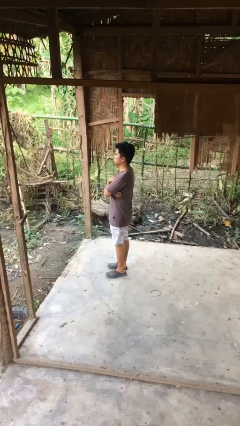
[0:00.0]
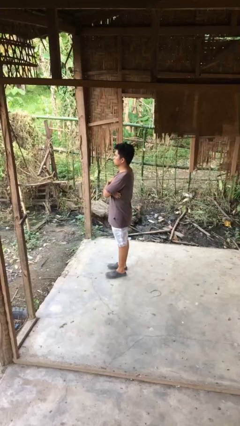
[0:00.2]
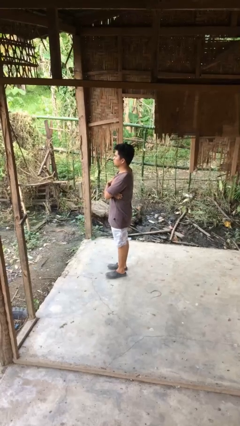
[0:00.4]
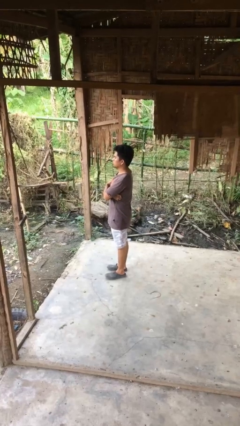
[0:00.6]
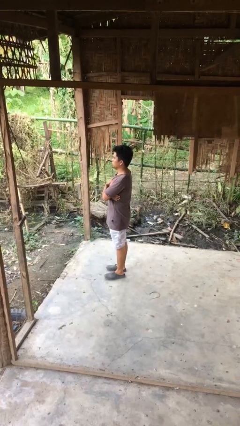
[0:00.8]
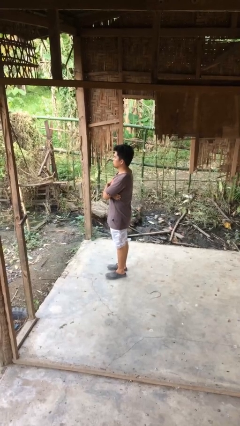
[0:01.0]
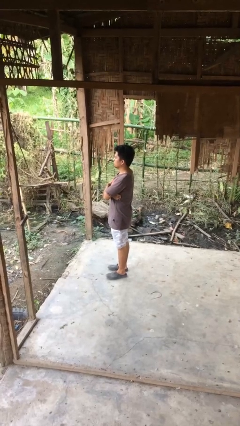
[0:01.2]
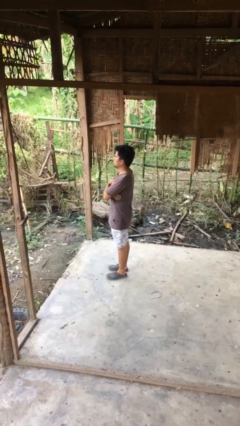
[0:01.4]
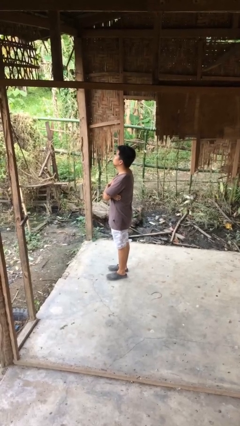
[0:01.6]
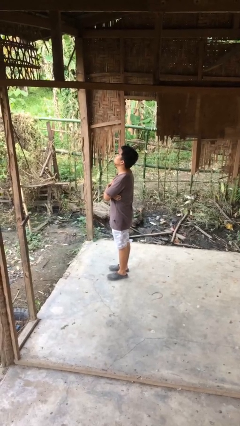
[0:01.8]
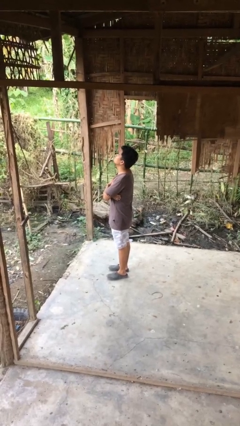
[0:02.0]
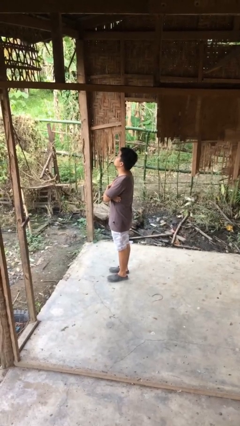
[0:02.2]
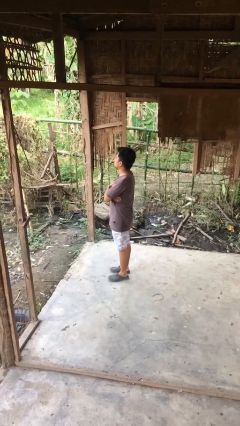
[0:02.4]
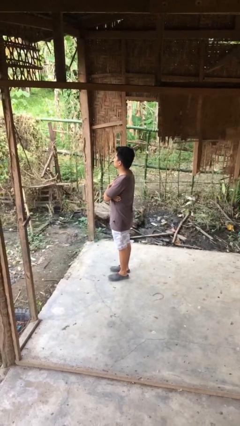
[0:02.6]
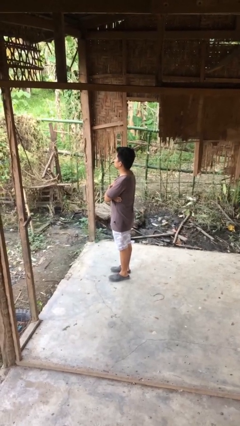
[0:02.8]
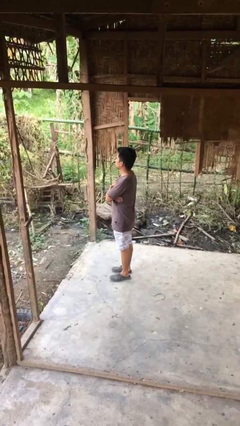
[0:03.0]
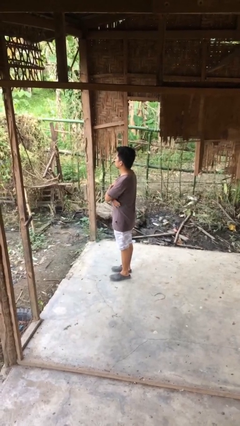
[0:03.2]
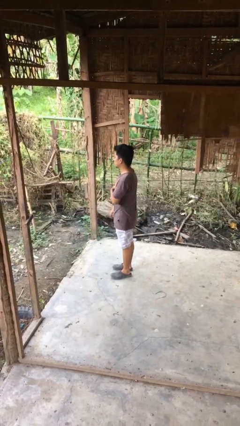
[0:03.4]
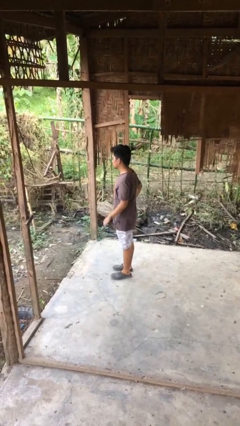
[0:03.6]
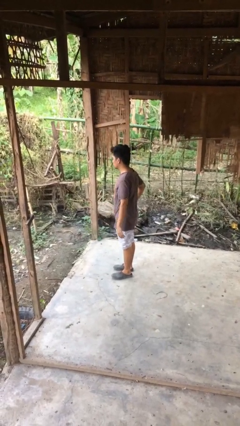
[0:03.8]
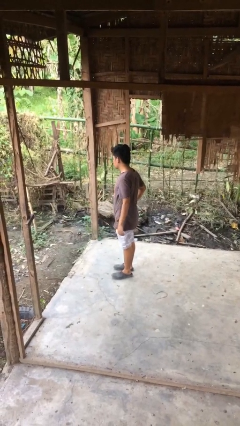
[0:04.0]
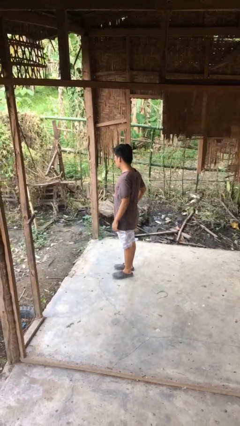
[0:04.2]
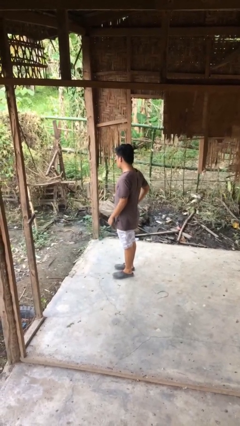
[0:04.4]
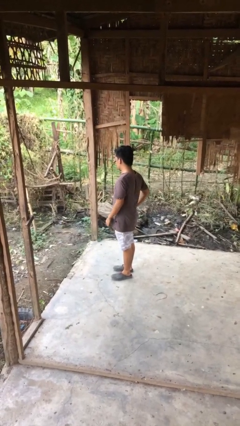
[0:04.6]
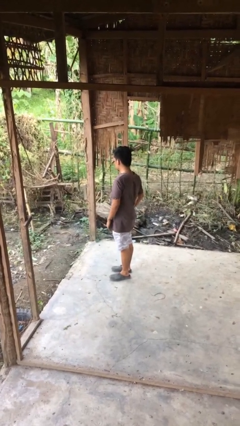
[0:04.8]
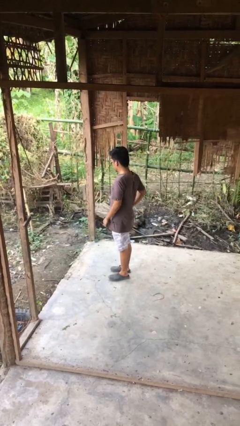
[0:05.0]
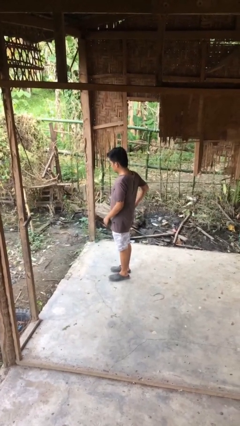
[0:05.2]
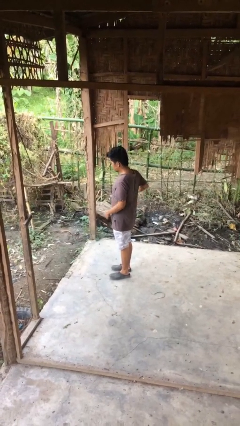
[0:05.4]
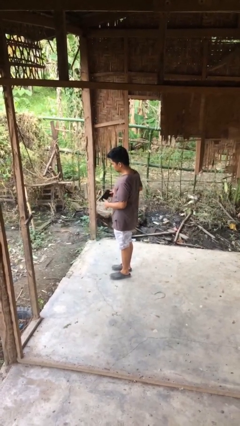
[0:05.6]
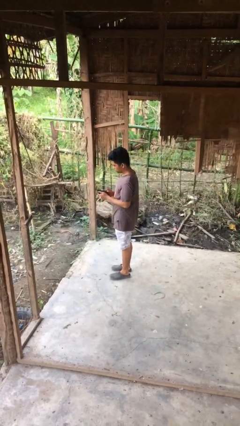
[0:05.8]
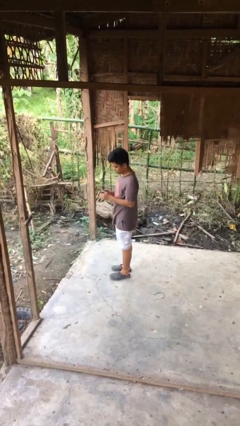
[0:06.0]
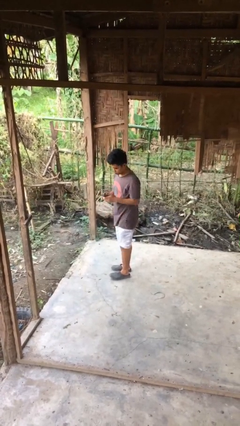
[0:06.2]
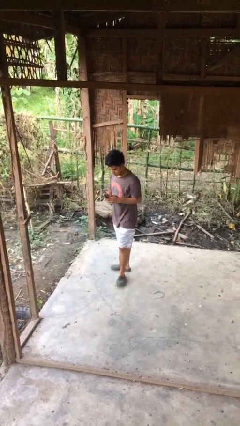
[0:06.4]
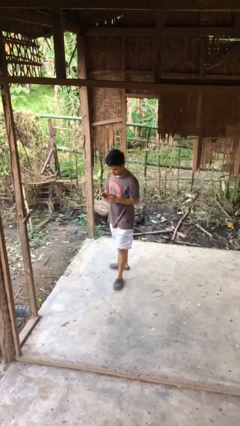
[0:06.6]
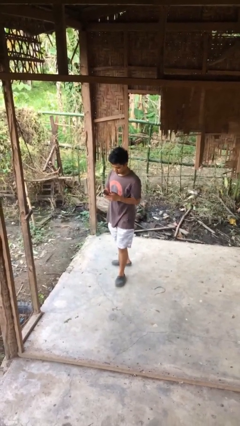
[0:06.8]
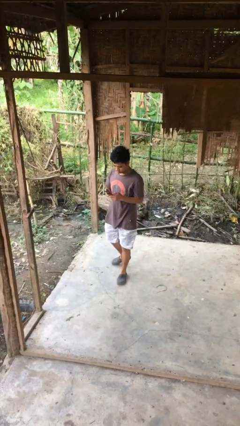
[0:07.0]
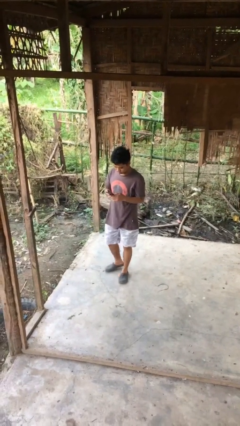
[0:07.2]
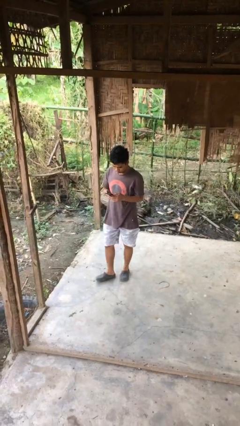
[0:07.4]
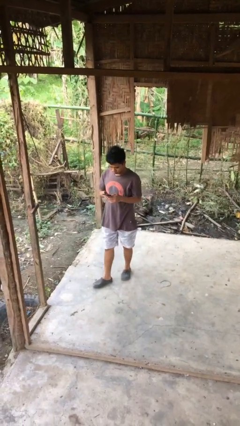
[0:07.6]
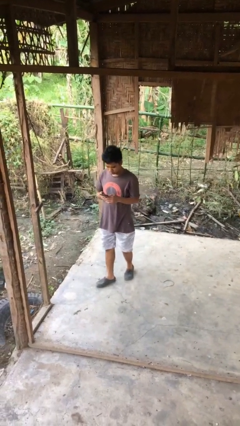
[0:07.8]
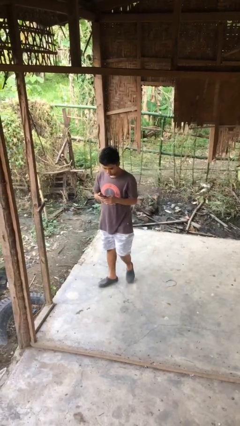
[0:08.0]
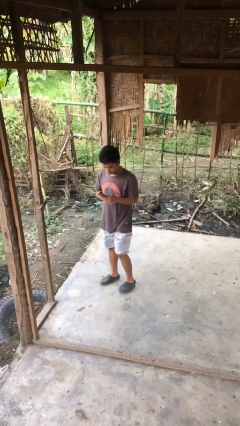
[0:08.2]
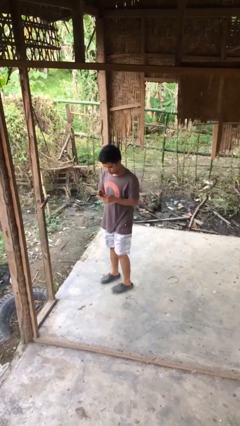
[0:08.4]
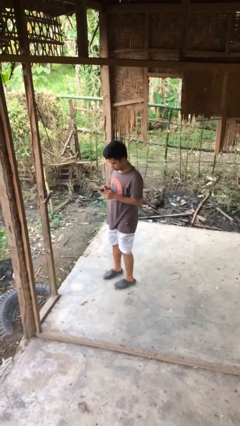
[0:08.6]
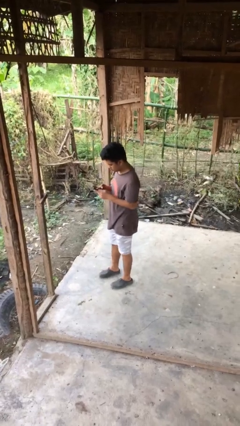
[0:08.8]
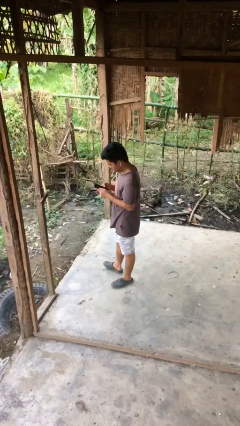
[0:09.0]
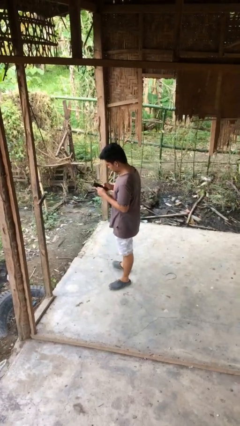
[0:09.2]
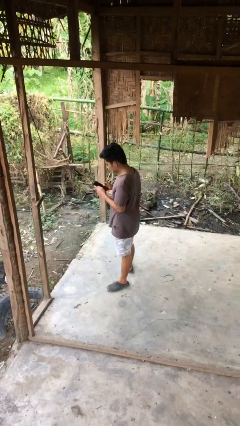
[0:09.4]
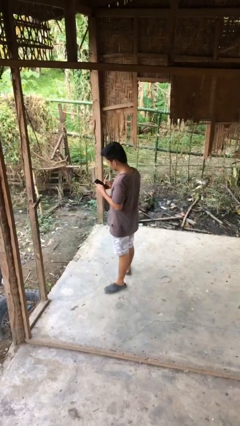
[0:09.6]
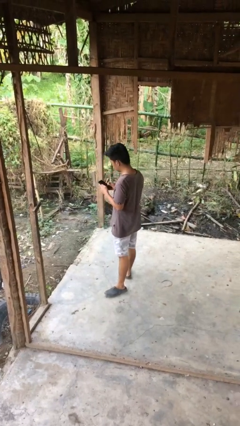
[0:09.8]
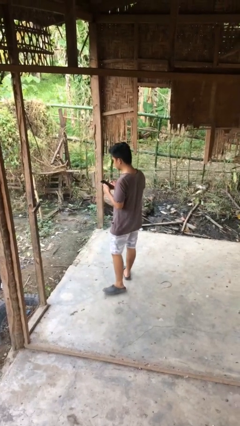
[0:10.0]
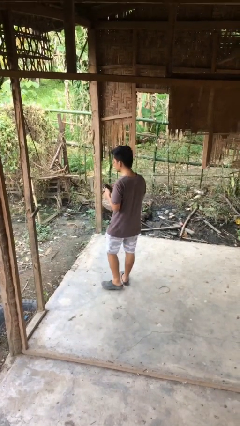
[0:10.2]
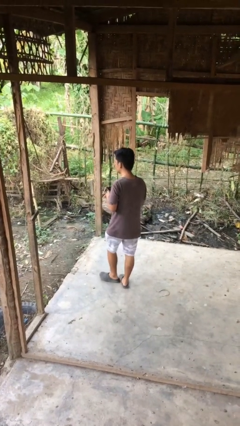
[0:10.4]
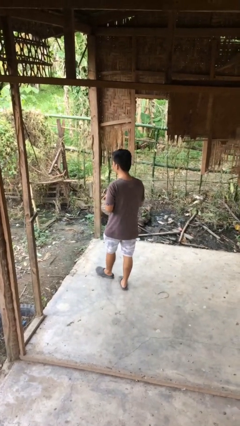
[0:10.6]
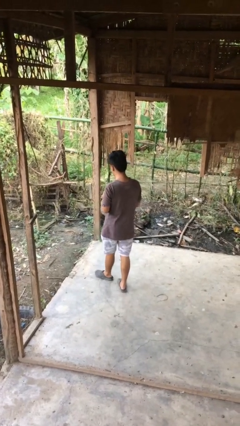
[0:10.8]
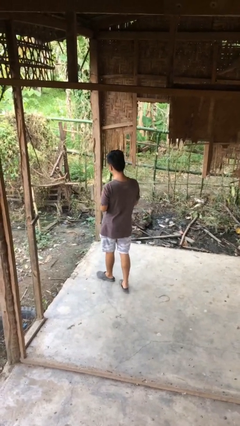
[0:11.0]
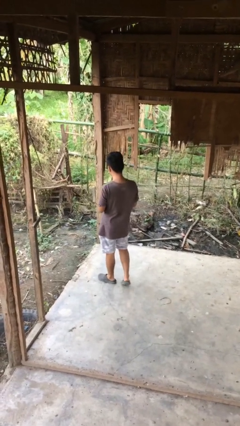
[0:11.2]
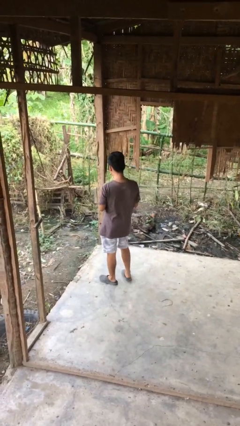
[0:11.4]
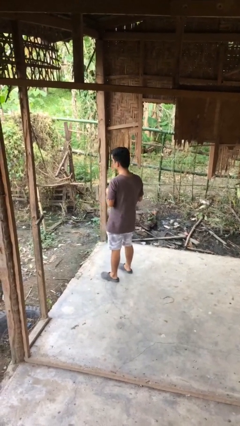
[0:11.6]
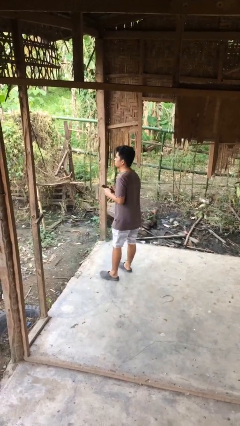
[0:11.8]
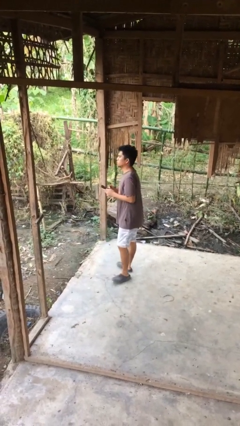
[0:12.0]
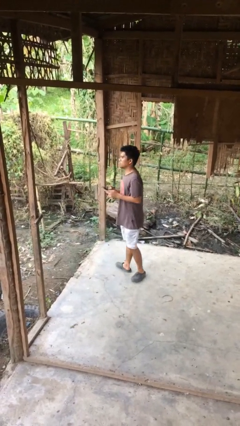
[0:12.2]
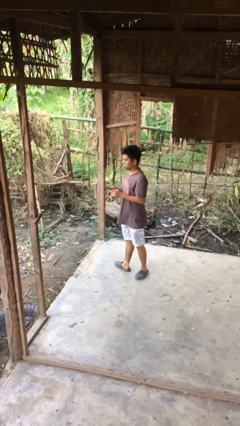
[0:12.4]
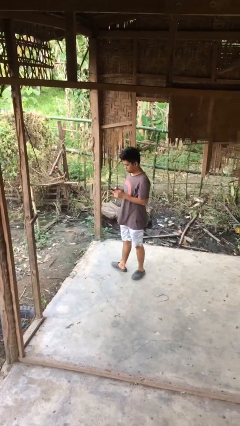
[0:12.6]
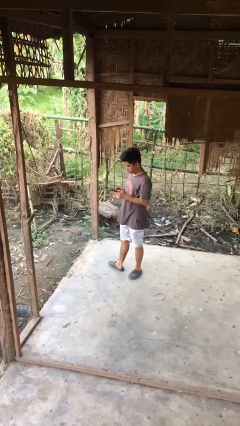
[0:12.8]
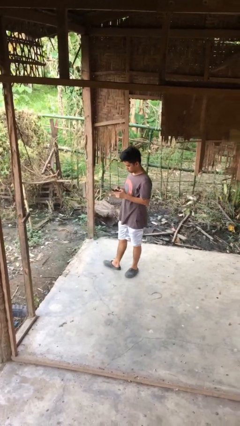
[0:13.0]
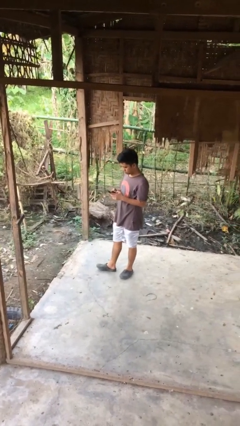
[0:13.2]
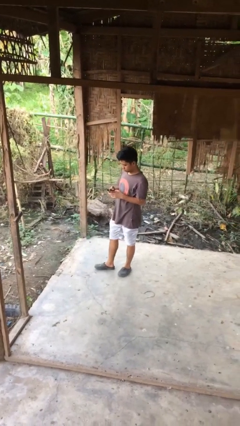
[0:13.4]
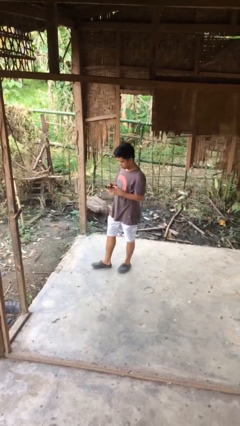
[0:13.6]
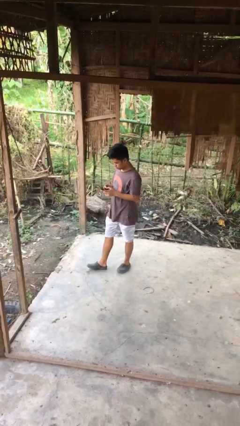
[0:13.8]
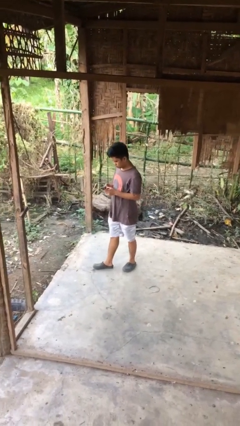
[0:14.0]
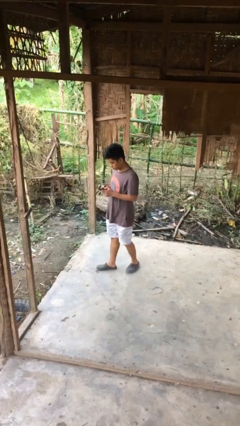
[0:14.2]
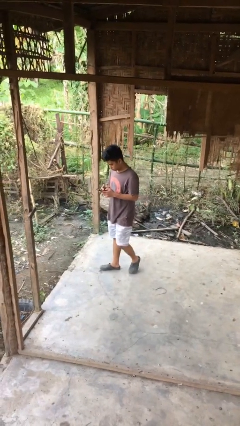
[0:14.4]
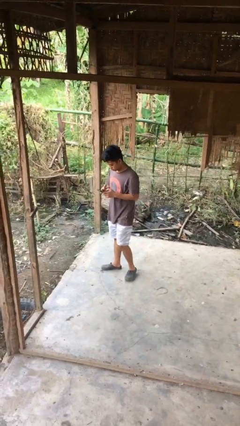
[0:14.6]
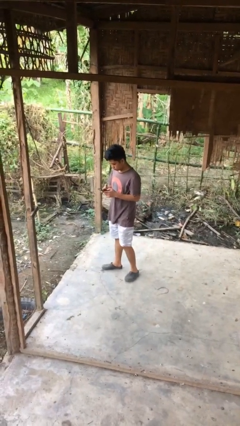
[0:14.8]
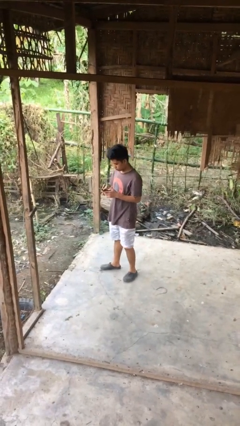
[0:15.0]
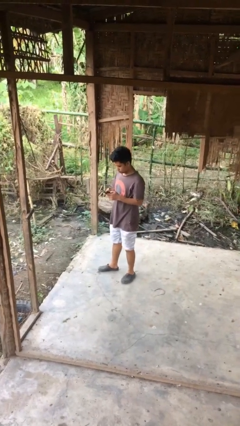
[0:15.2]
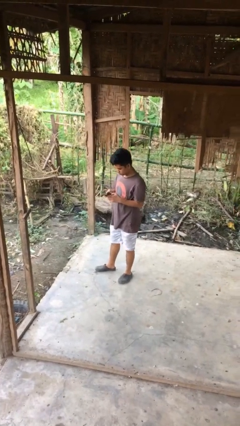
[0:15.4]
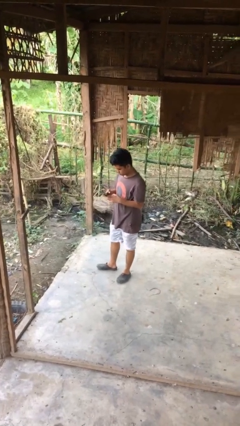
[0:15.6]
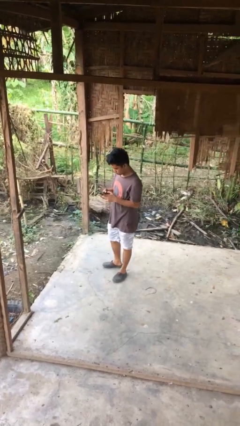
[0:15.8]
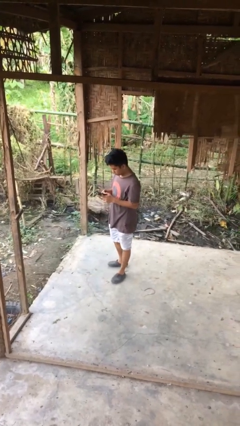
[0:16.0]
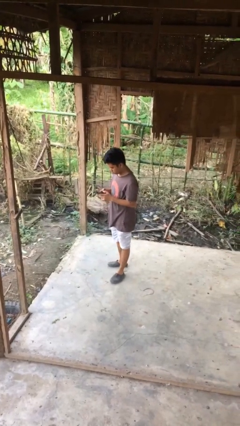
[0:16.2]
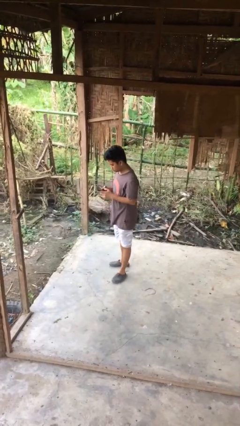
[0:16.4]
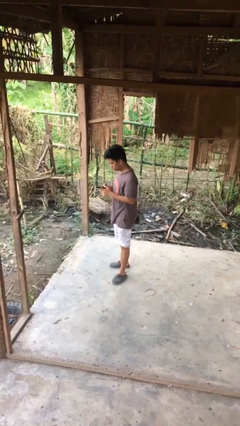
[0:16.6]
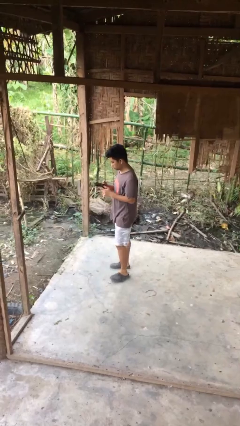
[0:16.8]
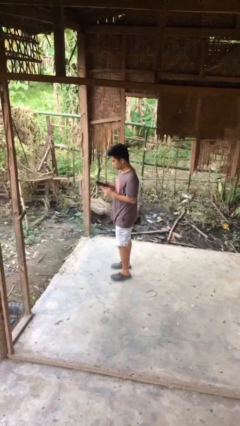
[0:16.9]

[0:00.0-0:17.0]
person walks

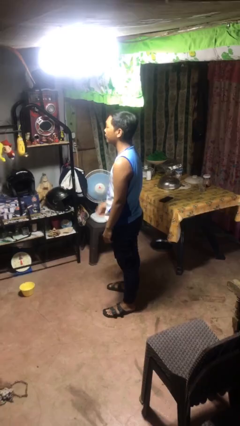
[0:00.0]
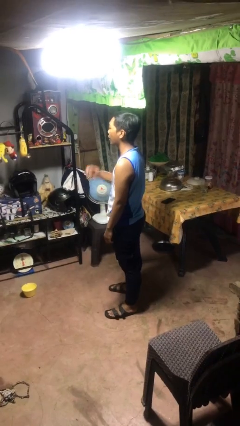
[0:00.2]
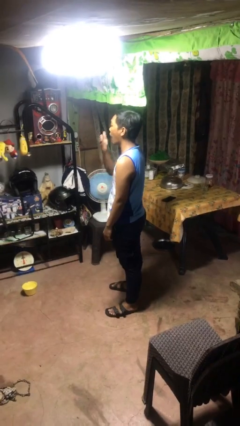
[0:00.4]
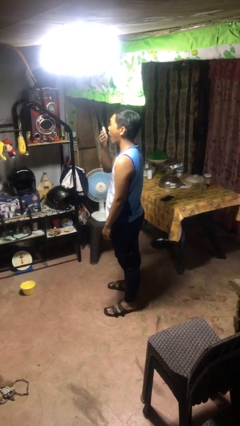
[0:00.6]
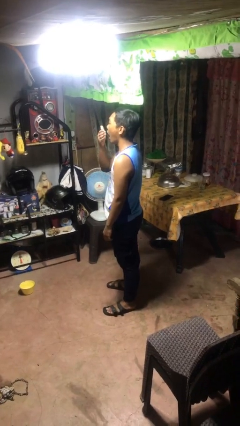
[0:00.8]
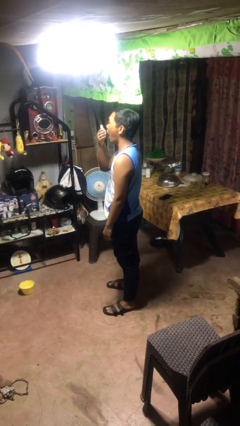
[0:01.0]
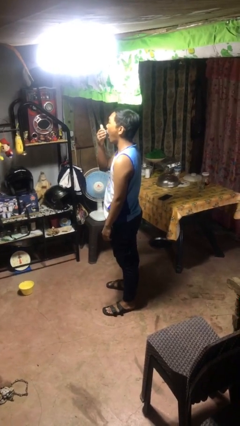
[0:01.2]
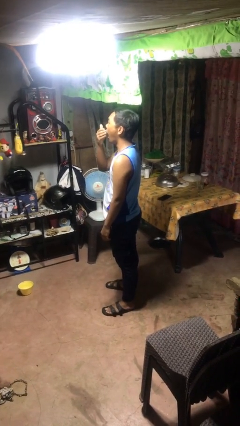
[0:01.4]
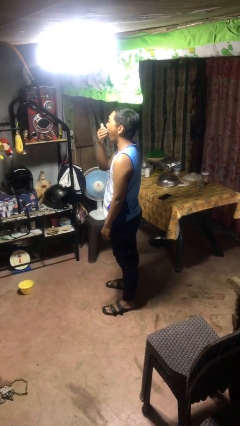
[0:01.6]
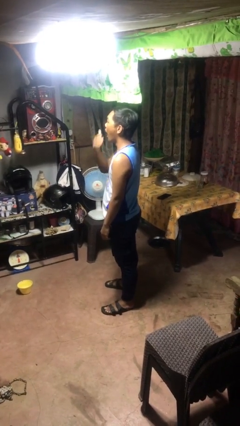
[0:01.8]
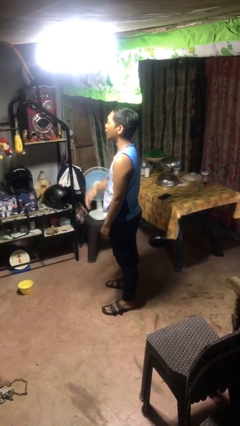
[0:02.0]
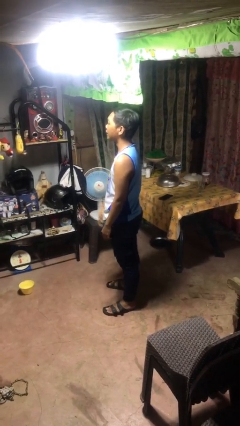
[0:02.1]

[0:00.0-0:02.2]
person yawns
